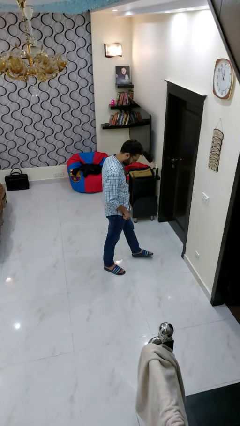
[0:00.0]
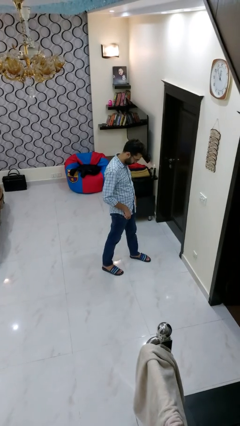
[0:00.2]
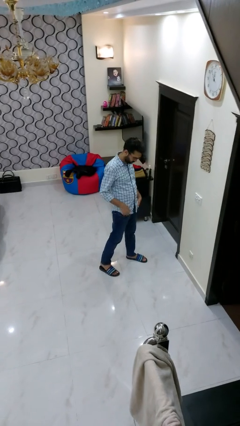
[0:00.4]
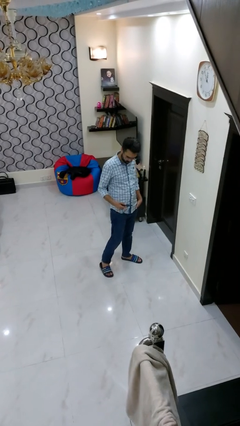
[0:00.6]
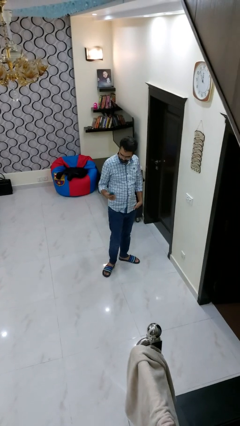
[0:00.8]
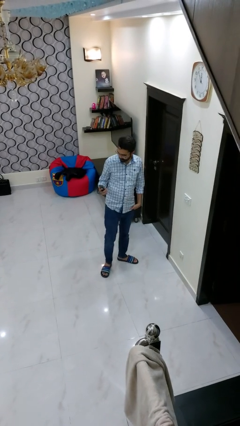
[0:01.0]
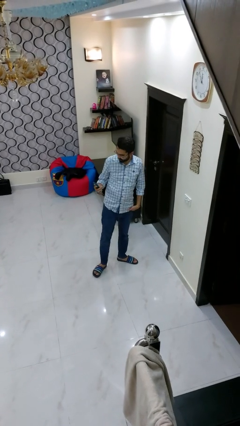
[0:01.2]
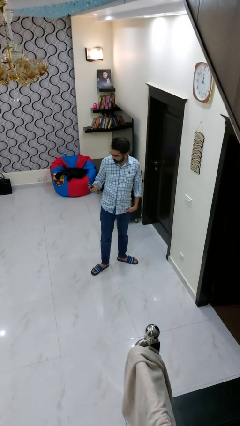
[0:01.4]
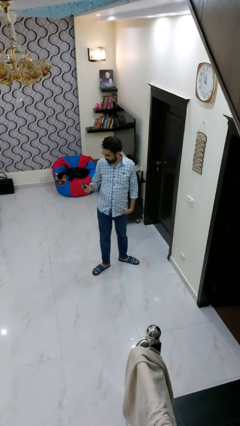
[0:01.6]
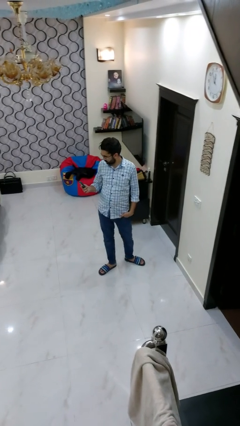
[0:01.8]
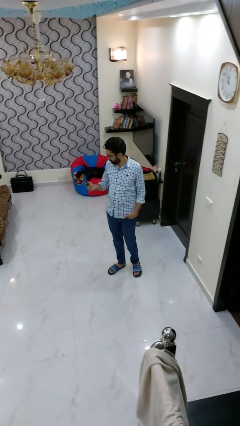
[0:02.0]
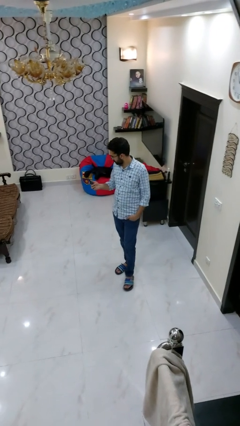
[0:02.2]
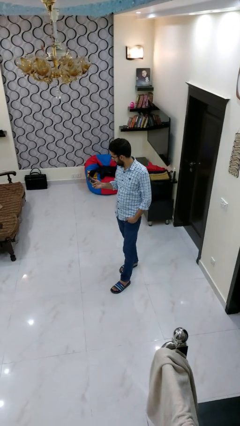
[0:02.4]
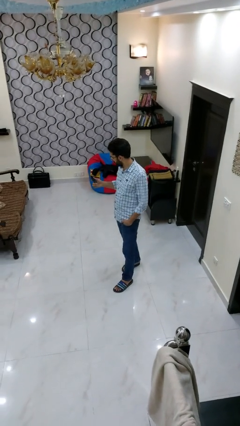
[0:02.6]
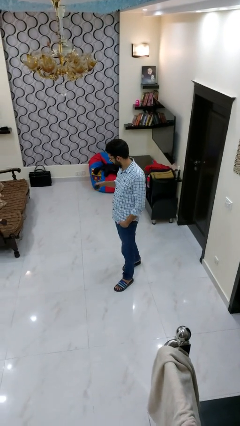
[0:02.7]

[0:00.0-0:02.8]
person takes phone from pocket

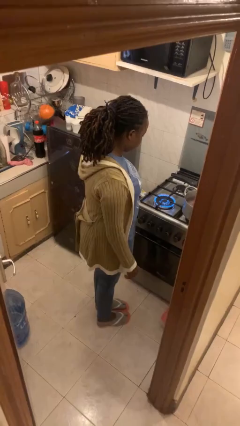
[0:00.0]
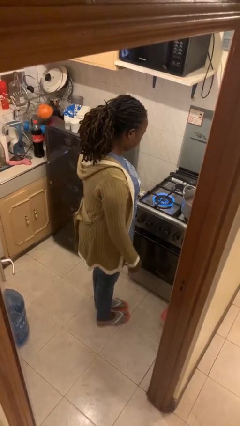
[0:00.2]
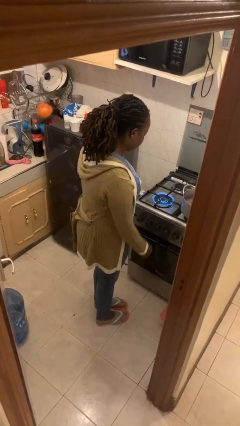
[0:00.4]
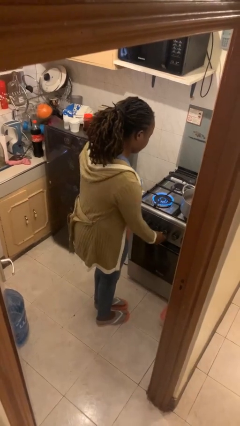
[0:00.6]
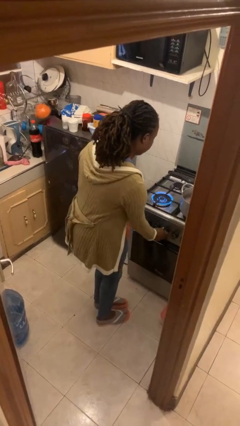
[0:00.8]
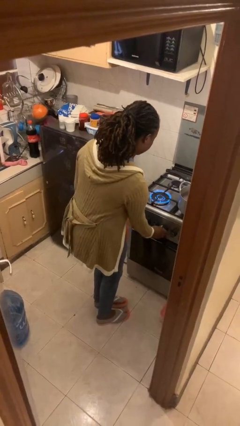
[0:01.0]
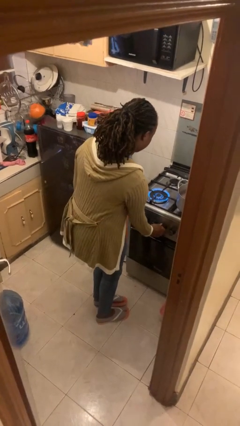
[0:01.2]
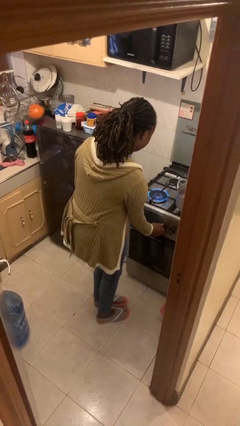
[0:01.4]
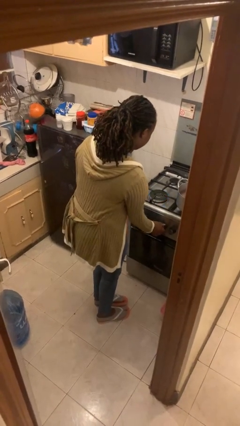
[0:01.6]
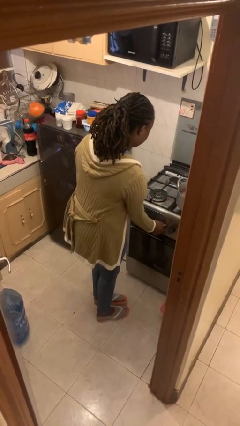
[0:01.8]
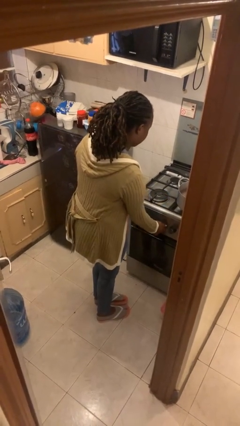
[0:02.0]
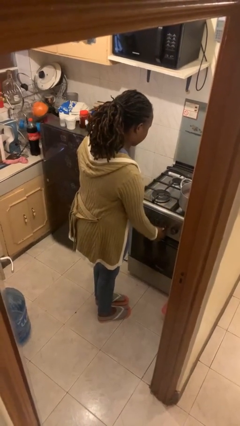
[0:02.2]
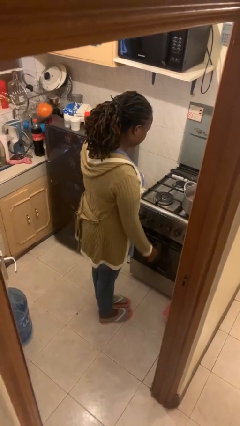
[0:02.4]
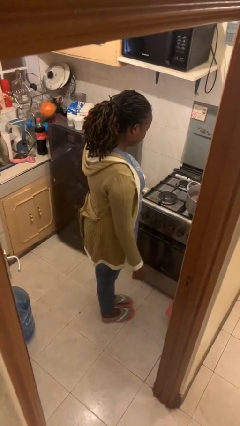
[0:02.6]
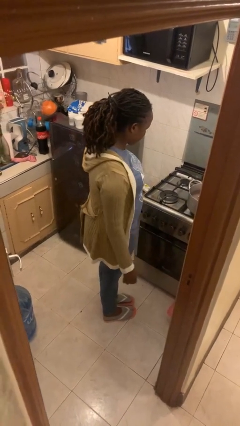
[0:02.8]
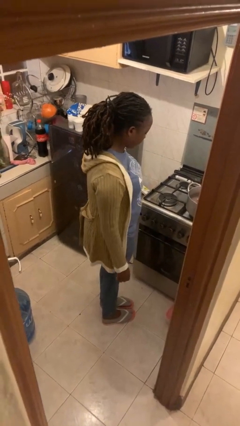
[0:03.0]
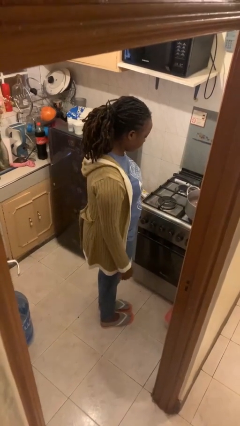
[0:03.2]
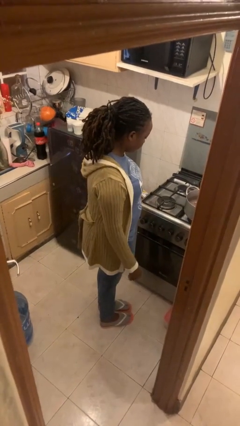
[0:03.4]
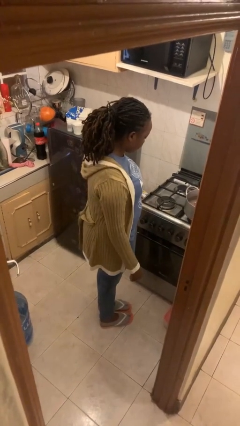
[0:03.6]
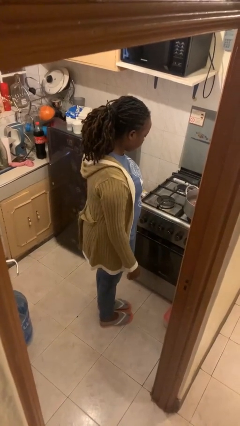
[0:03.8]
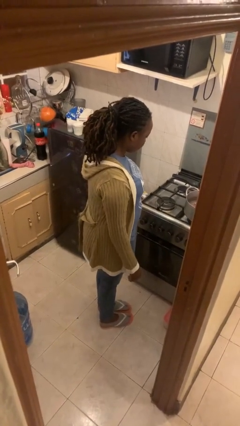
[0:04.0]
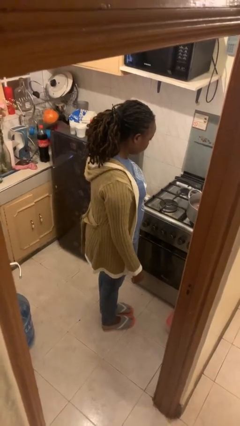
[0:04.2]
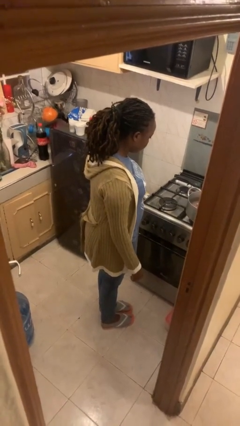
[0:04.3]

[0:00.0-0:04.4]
person turns off stovetop

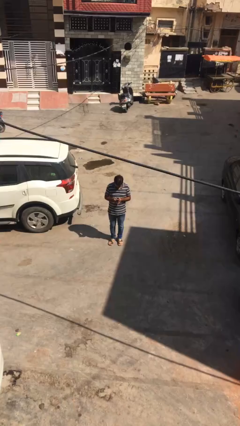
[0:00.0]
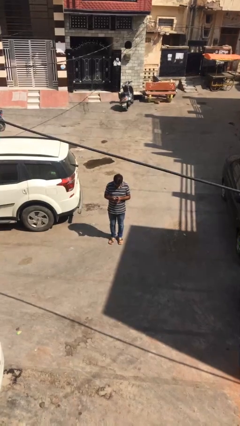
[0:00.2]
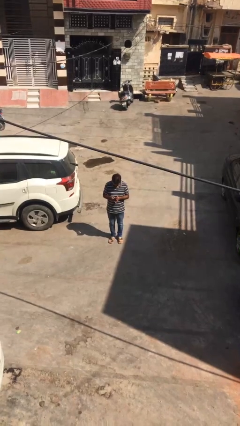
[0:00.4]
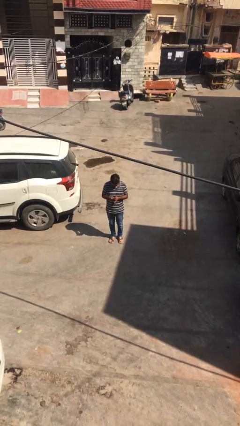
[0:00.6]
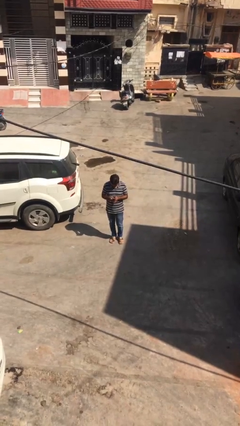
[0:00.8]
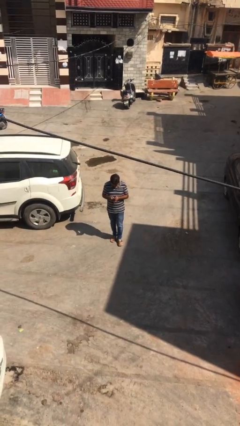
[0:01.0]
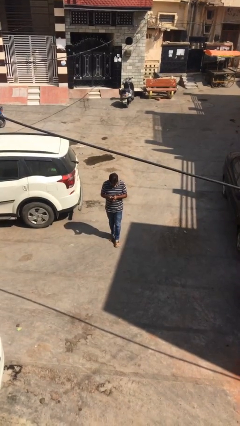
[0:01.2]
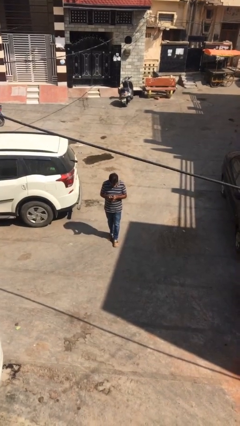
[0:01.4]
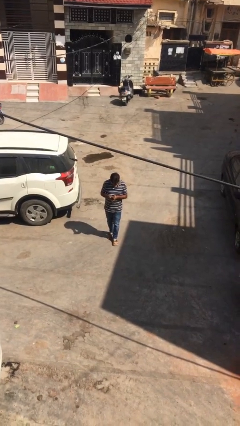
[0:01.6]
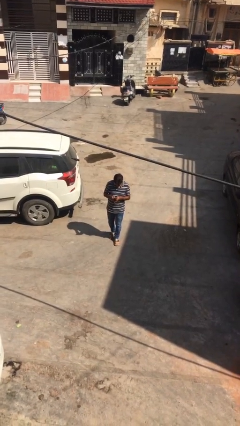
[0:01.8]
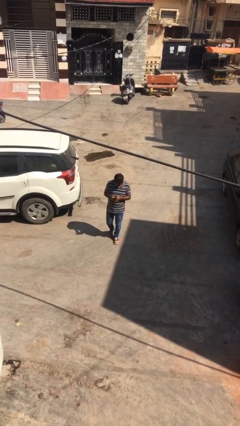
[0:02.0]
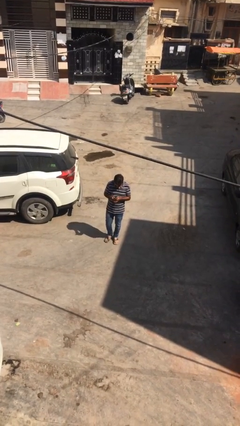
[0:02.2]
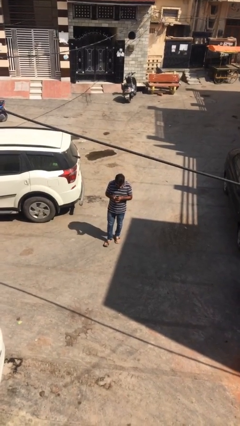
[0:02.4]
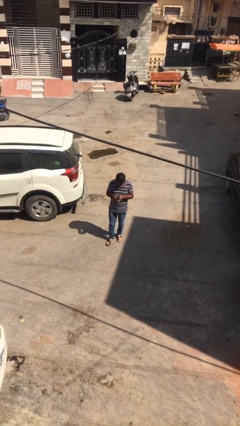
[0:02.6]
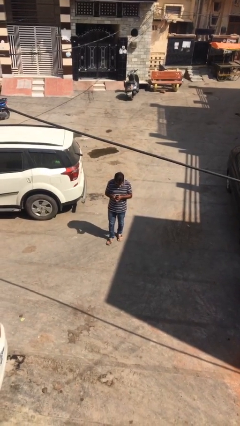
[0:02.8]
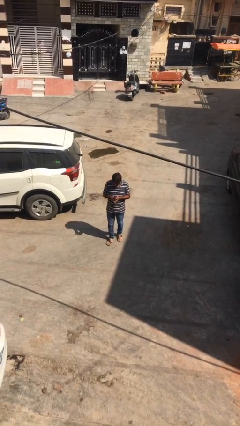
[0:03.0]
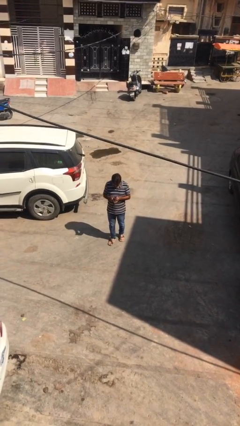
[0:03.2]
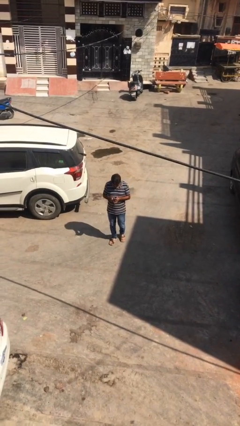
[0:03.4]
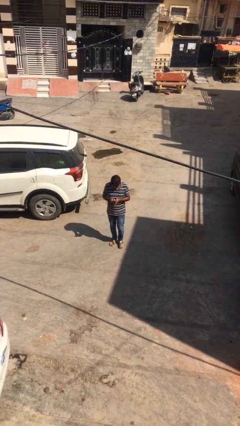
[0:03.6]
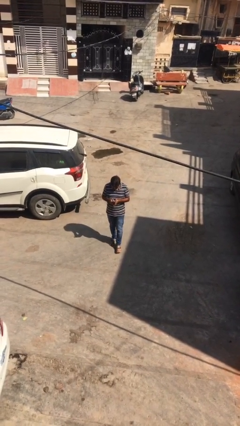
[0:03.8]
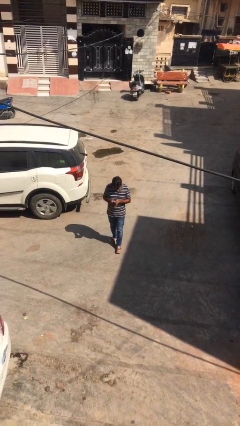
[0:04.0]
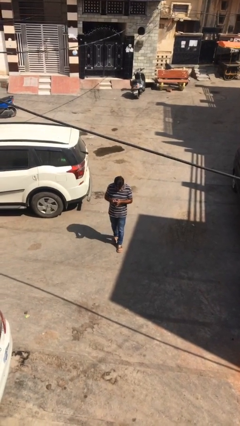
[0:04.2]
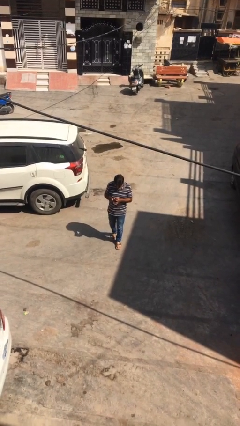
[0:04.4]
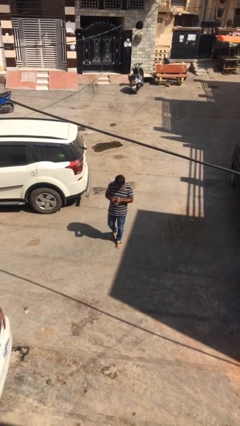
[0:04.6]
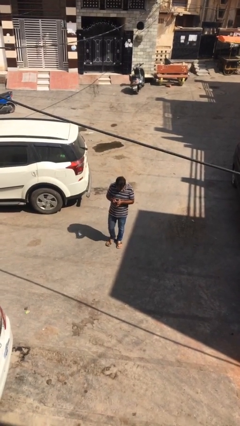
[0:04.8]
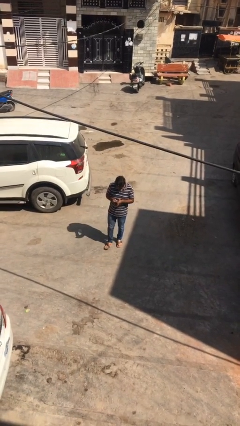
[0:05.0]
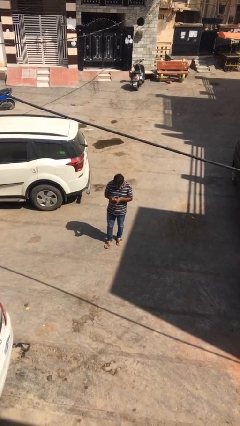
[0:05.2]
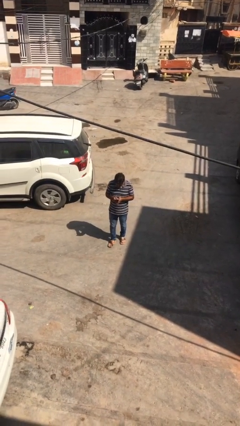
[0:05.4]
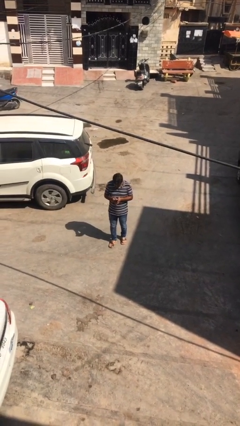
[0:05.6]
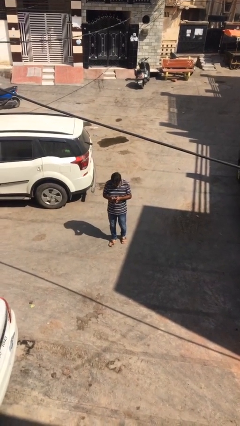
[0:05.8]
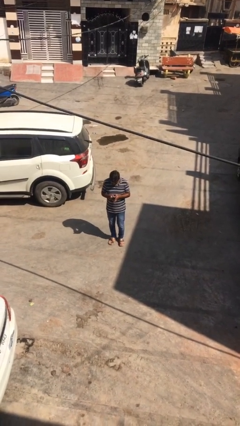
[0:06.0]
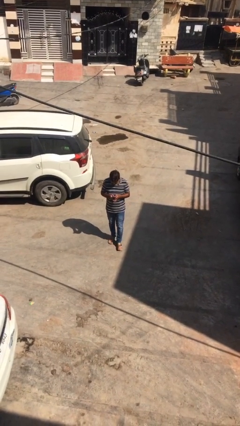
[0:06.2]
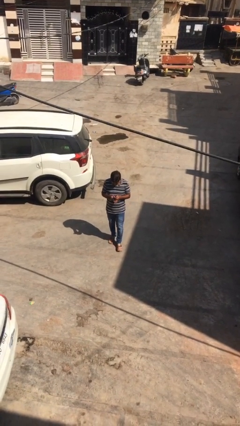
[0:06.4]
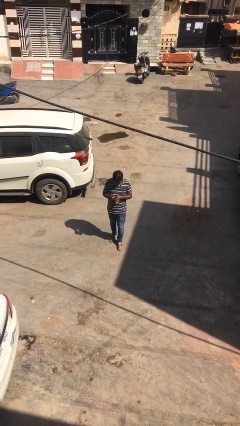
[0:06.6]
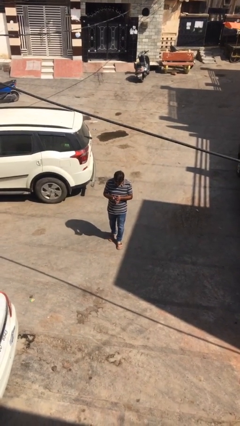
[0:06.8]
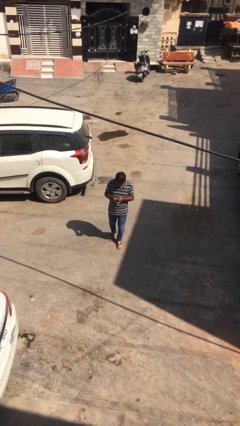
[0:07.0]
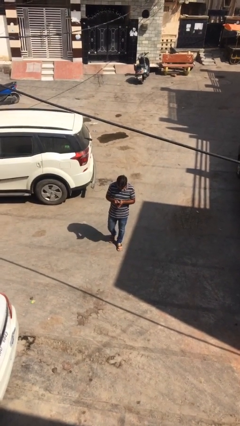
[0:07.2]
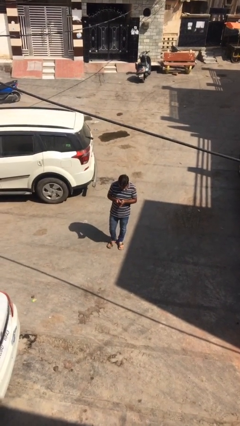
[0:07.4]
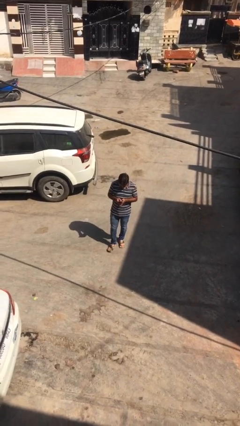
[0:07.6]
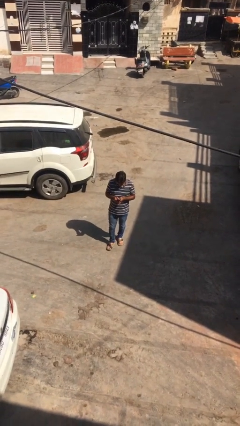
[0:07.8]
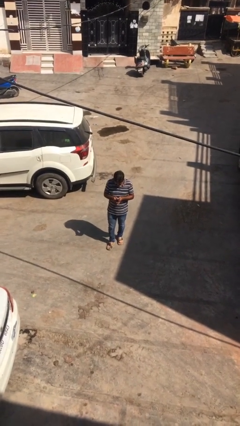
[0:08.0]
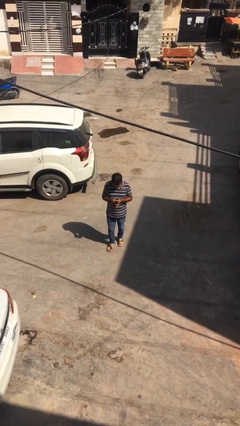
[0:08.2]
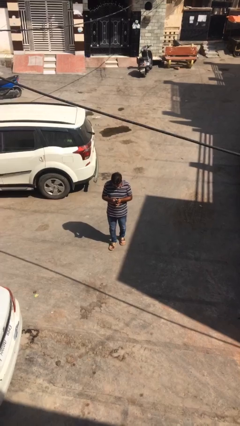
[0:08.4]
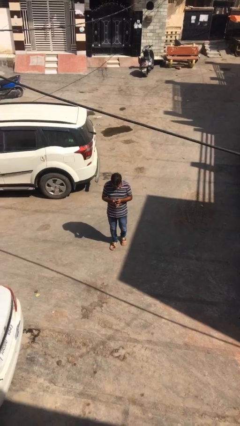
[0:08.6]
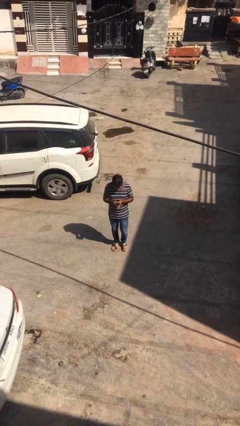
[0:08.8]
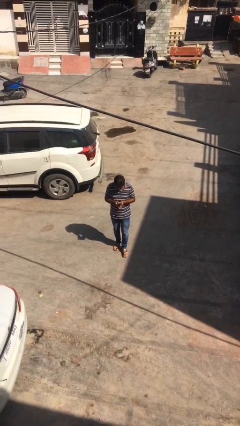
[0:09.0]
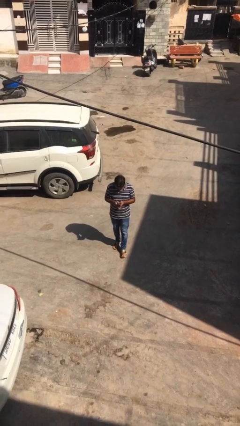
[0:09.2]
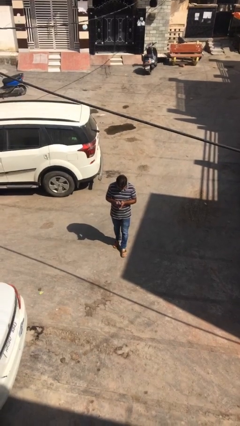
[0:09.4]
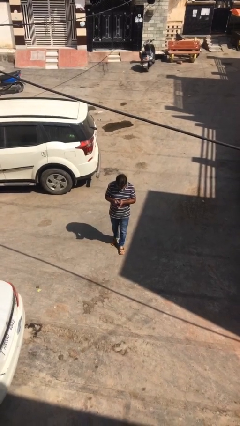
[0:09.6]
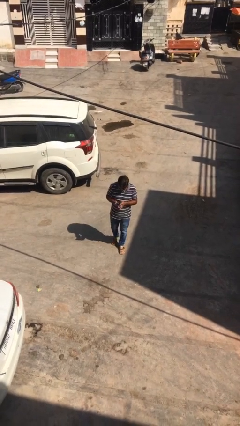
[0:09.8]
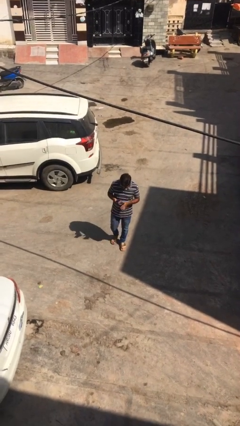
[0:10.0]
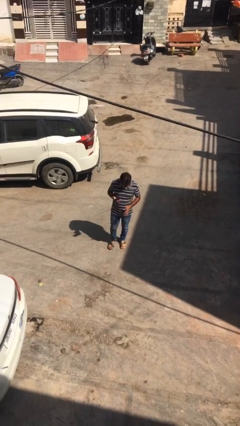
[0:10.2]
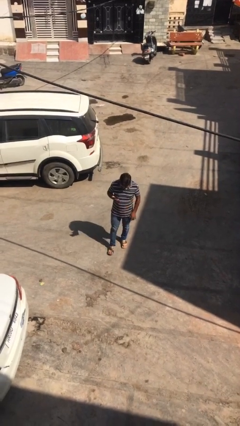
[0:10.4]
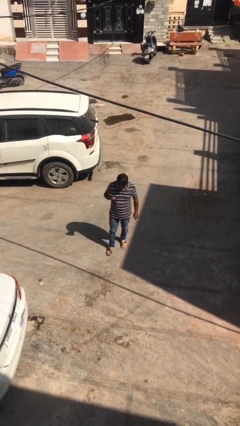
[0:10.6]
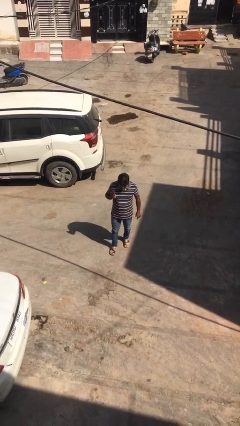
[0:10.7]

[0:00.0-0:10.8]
person texts on phone
